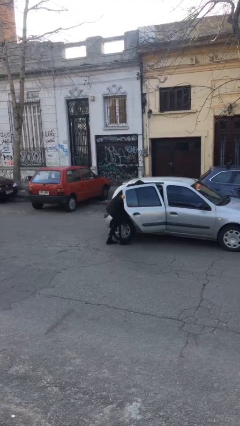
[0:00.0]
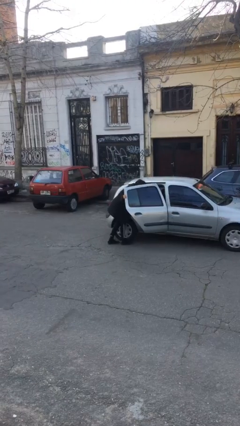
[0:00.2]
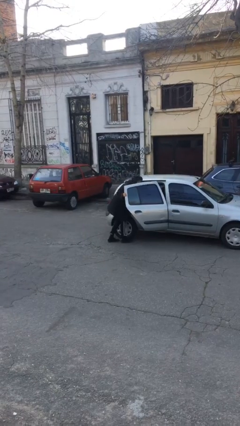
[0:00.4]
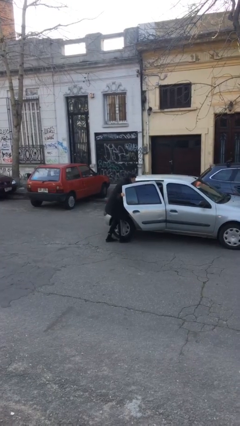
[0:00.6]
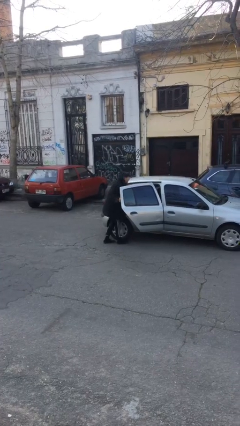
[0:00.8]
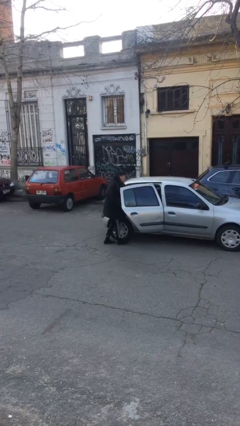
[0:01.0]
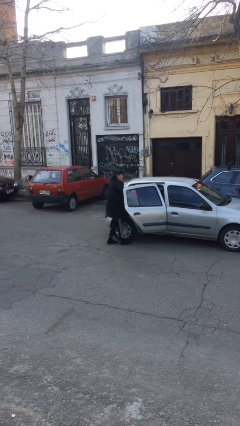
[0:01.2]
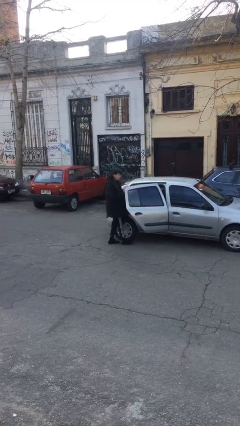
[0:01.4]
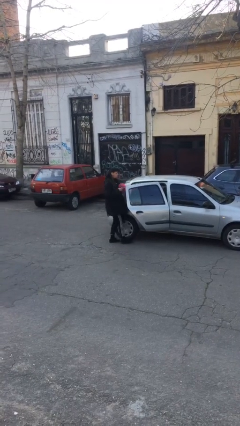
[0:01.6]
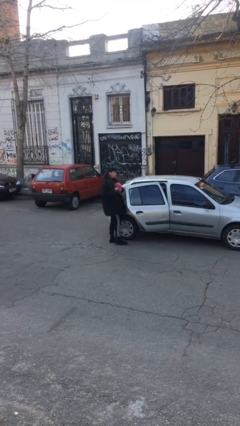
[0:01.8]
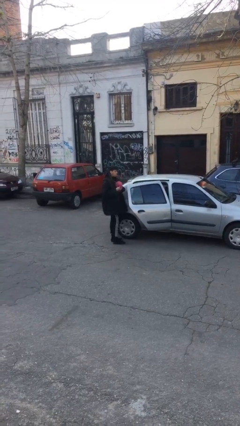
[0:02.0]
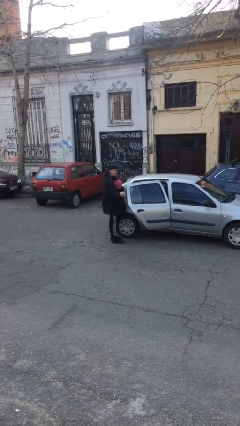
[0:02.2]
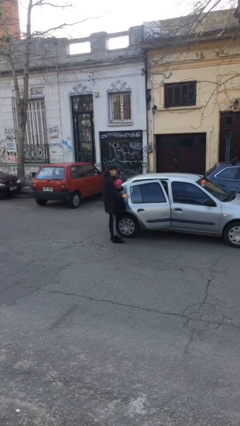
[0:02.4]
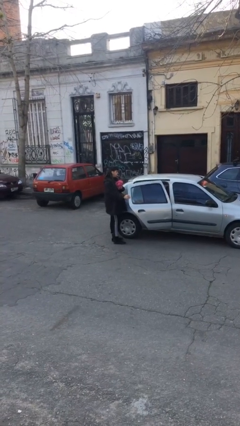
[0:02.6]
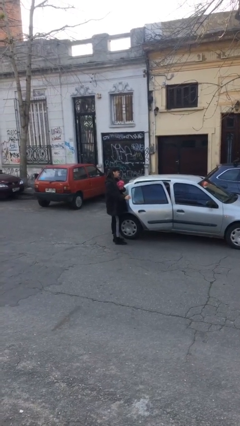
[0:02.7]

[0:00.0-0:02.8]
person unloads car

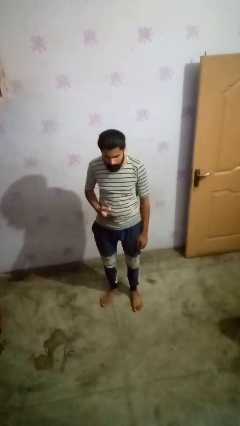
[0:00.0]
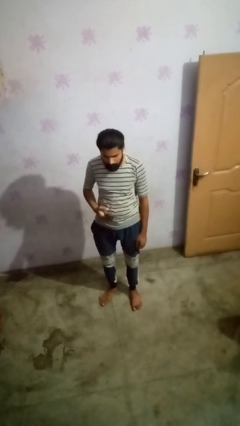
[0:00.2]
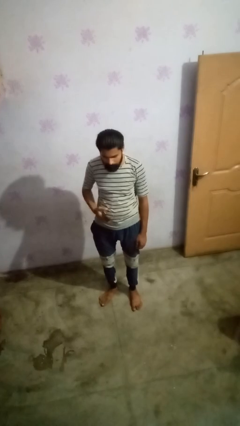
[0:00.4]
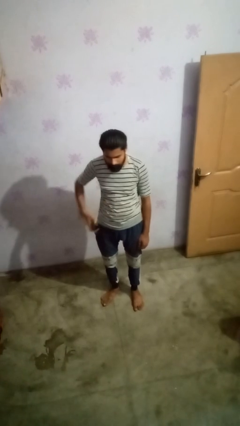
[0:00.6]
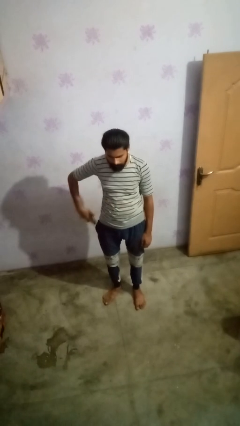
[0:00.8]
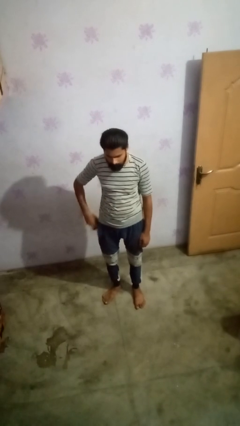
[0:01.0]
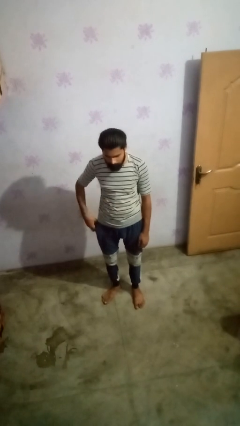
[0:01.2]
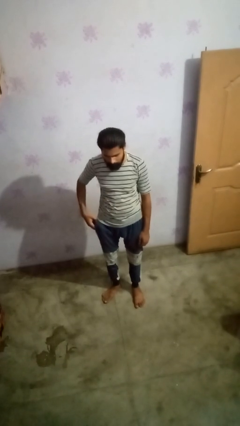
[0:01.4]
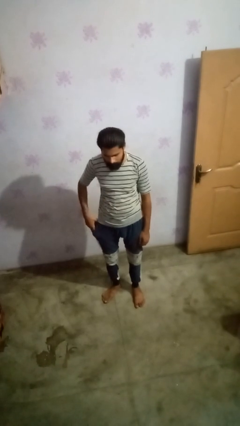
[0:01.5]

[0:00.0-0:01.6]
person puts phone into pocket

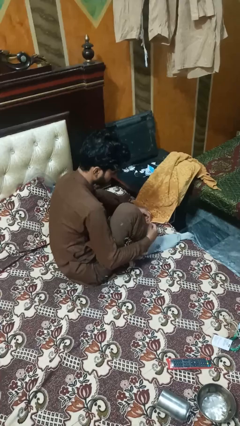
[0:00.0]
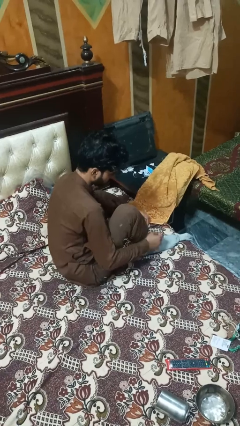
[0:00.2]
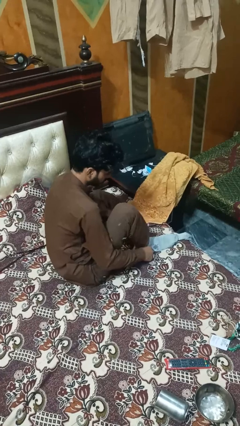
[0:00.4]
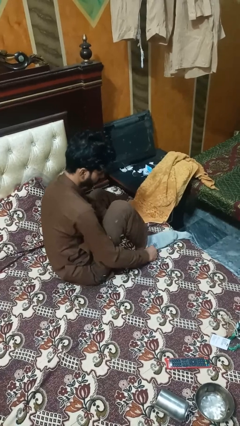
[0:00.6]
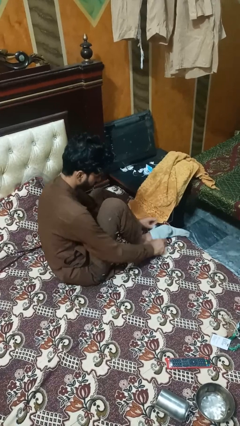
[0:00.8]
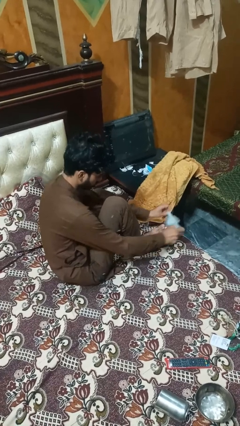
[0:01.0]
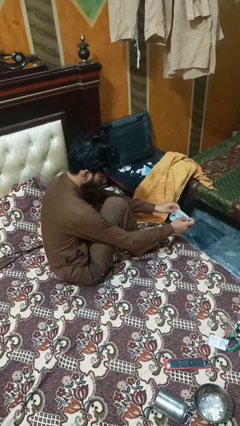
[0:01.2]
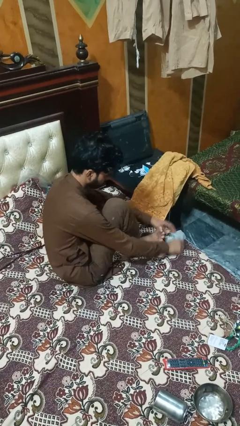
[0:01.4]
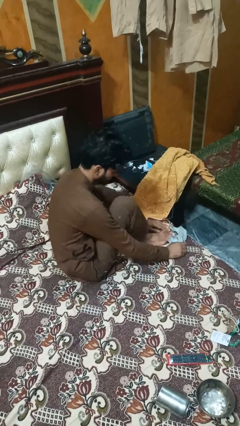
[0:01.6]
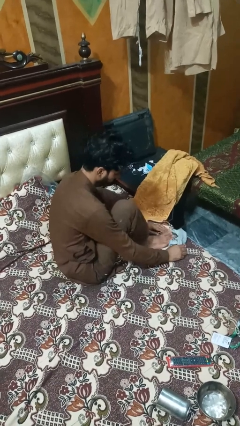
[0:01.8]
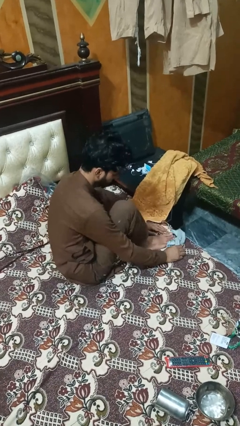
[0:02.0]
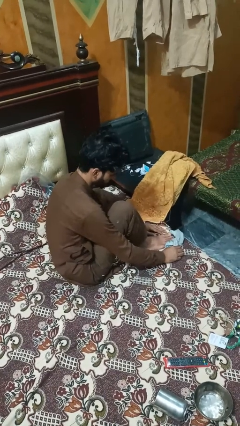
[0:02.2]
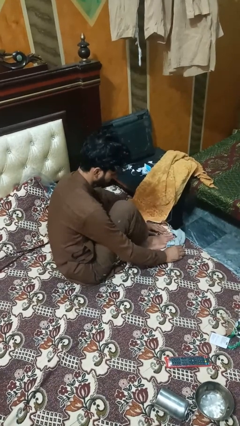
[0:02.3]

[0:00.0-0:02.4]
person takes off socks

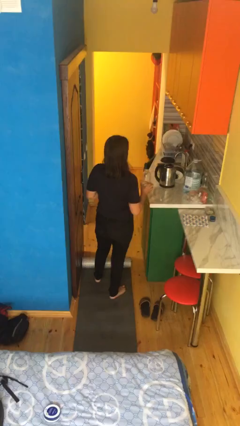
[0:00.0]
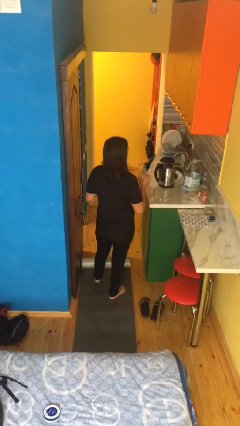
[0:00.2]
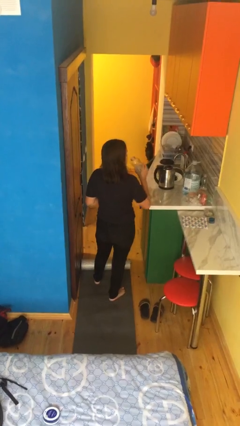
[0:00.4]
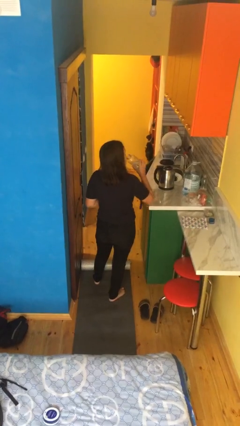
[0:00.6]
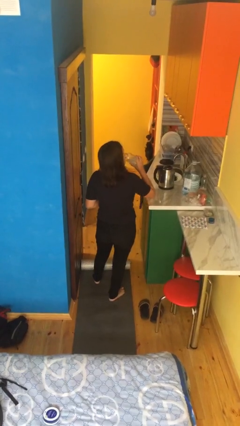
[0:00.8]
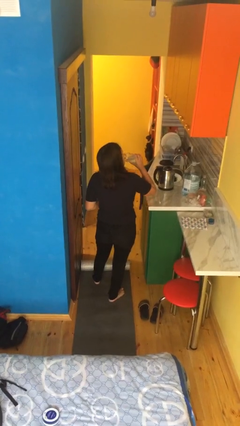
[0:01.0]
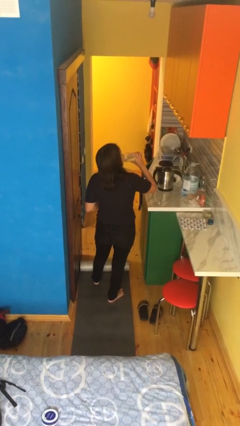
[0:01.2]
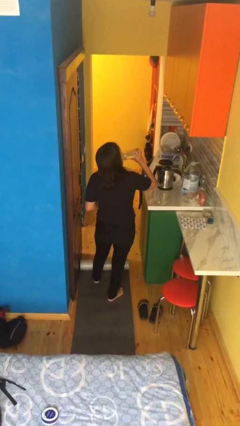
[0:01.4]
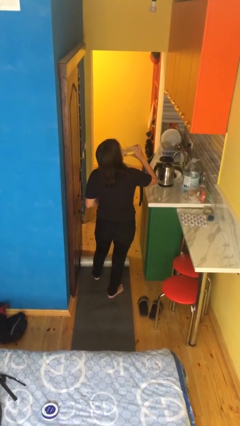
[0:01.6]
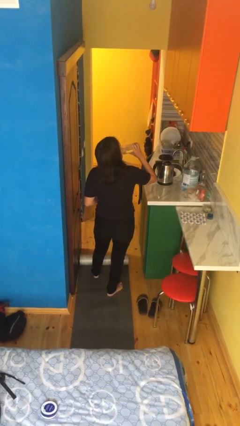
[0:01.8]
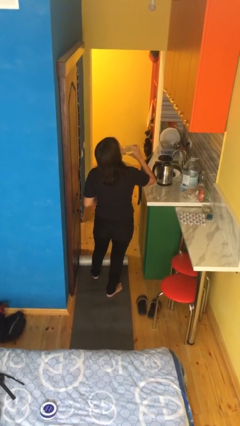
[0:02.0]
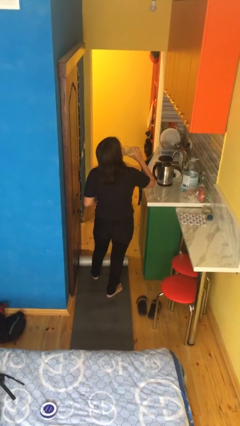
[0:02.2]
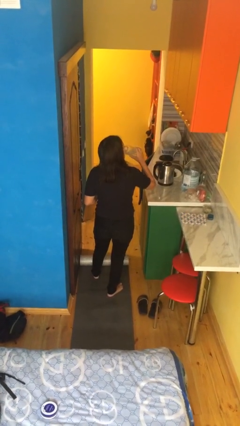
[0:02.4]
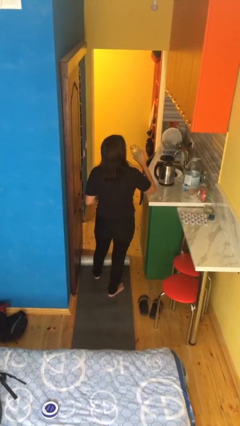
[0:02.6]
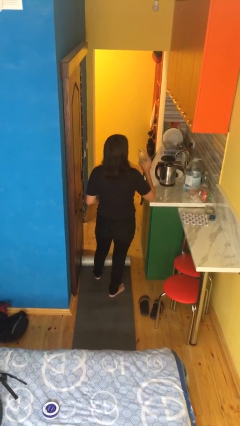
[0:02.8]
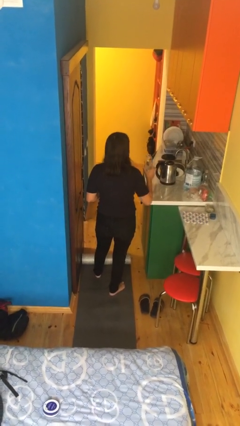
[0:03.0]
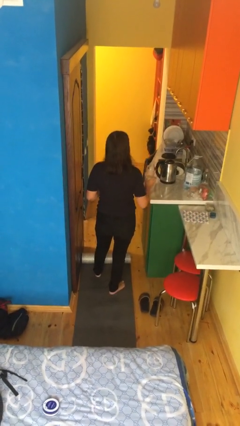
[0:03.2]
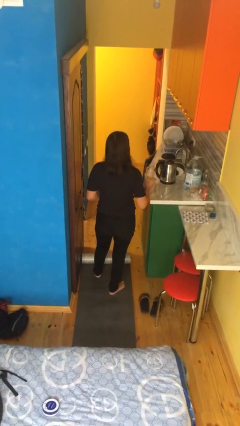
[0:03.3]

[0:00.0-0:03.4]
person drinks from bottle

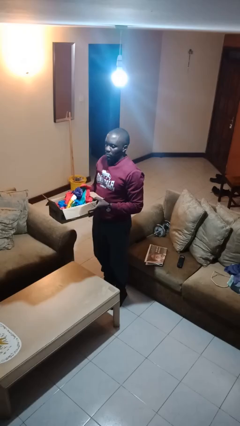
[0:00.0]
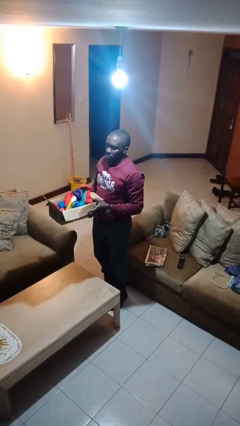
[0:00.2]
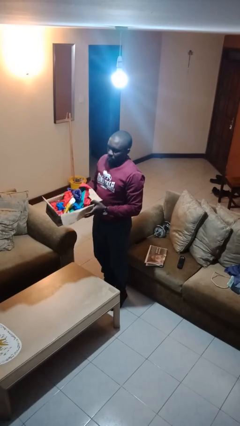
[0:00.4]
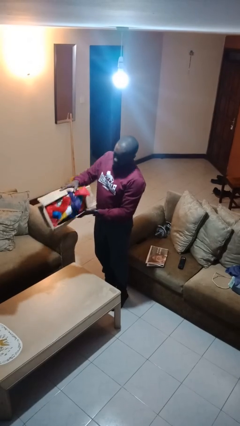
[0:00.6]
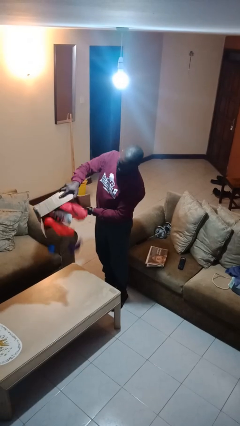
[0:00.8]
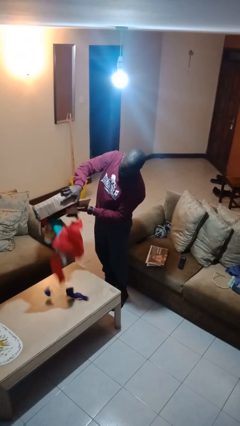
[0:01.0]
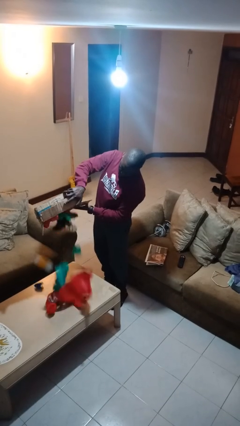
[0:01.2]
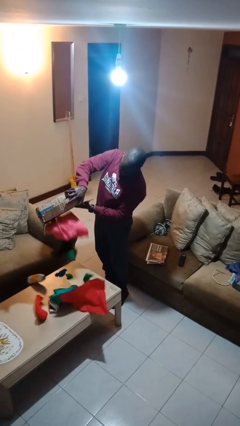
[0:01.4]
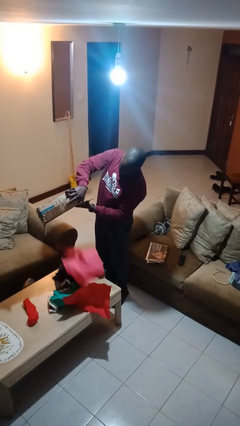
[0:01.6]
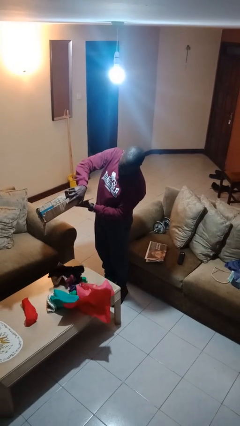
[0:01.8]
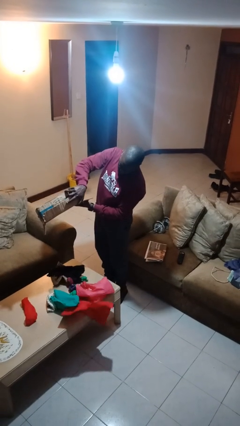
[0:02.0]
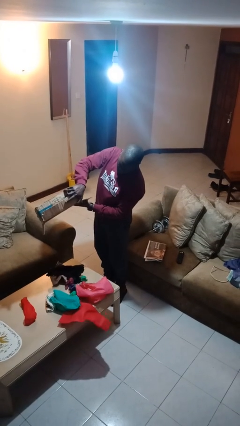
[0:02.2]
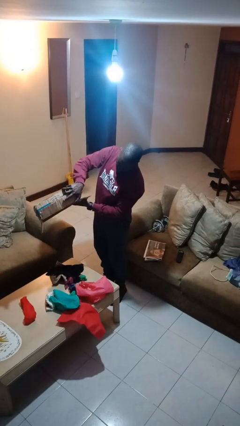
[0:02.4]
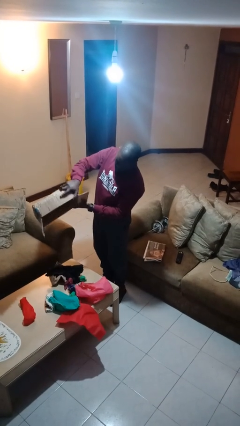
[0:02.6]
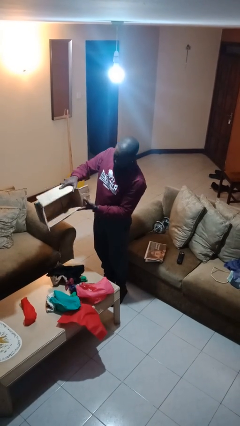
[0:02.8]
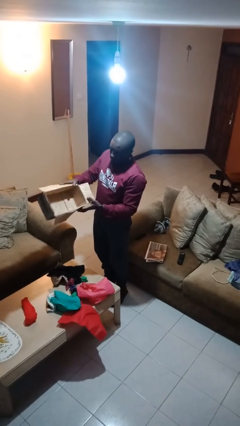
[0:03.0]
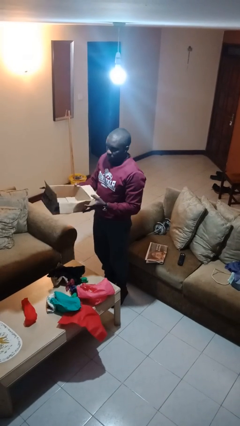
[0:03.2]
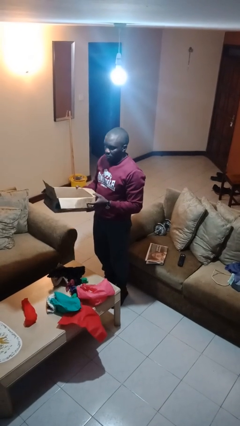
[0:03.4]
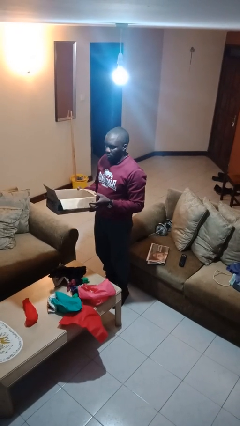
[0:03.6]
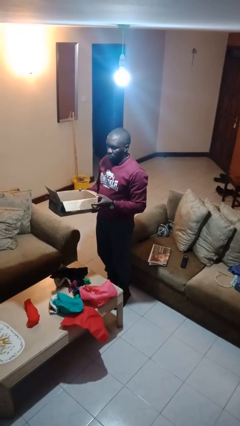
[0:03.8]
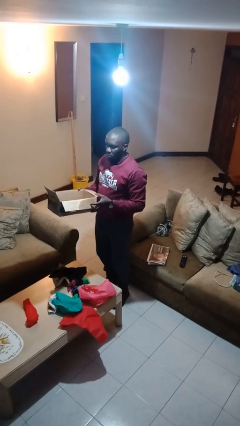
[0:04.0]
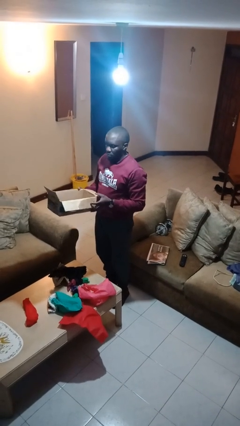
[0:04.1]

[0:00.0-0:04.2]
person unloads box onto table

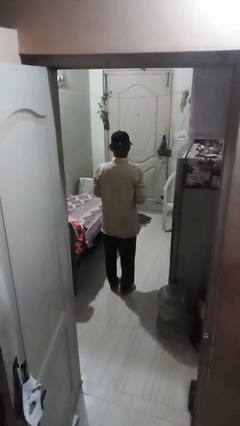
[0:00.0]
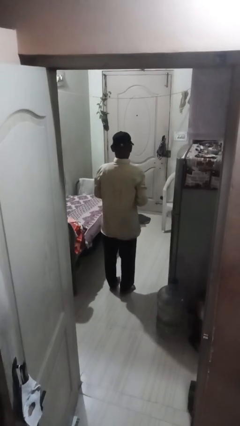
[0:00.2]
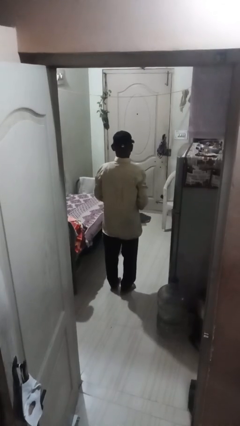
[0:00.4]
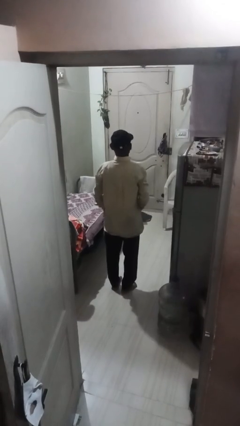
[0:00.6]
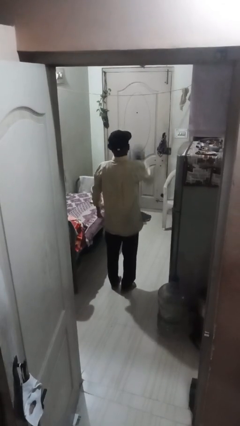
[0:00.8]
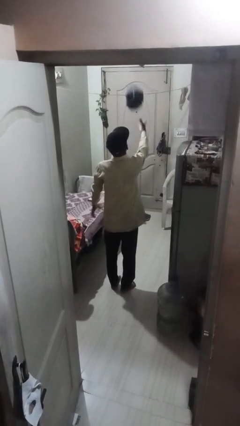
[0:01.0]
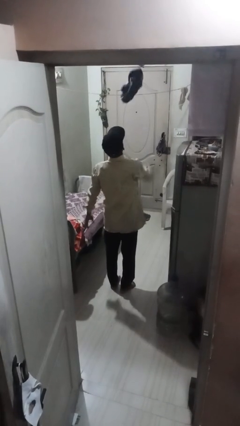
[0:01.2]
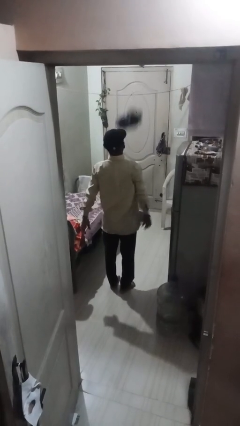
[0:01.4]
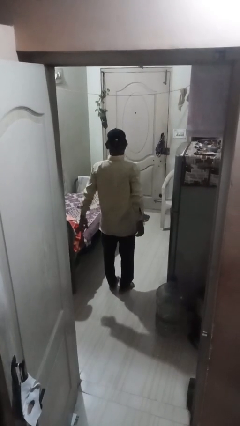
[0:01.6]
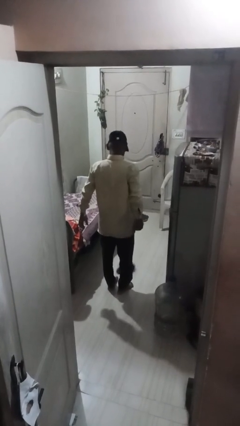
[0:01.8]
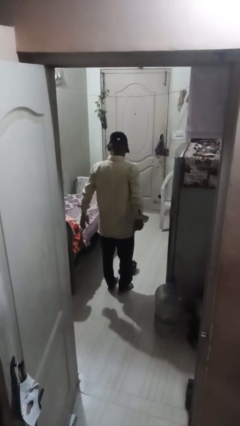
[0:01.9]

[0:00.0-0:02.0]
person throws object into air

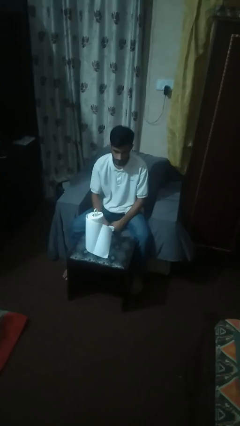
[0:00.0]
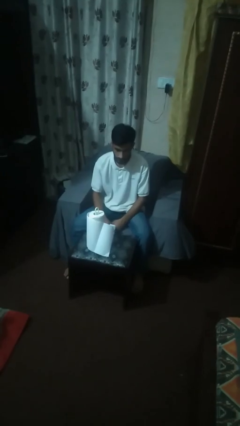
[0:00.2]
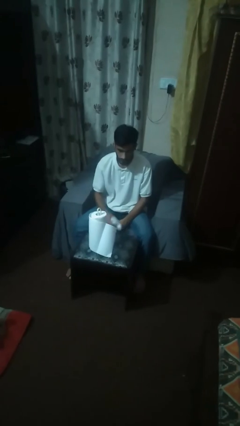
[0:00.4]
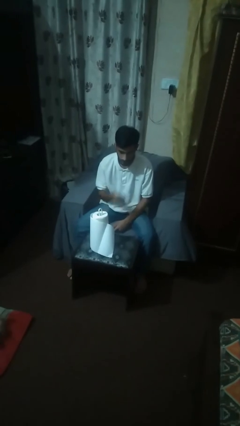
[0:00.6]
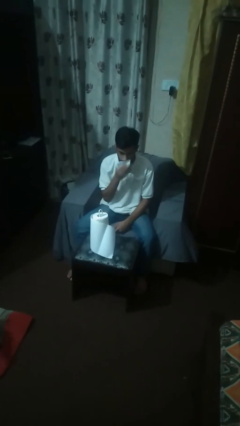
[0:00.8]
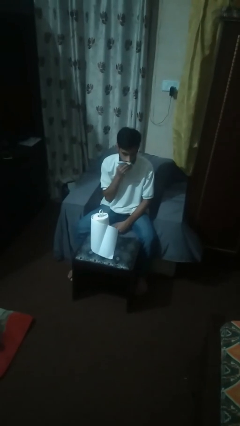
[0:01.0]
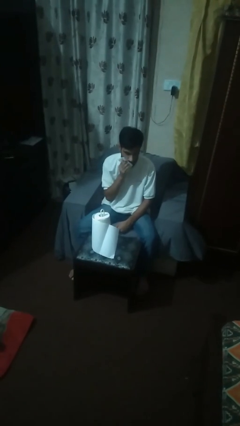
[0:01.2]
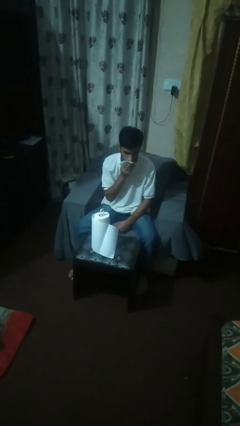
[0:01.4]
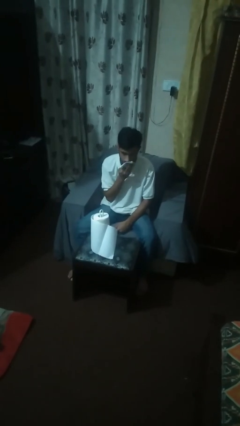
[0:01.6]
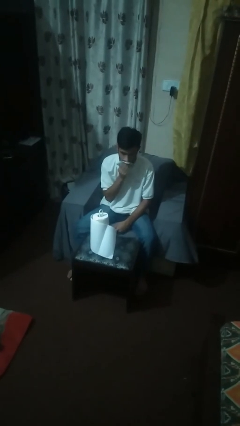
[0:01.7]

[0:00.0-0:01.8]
person wipes mouth with napkin
